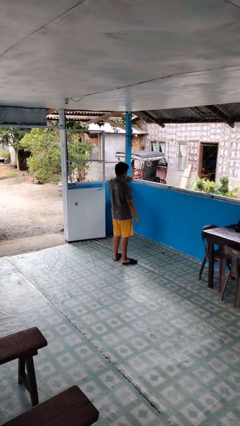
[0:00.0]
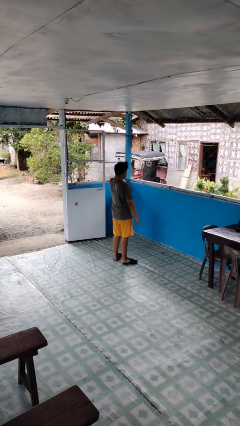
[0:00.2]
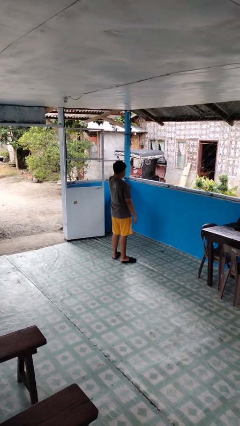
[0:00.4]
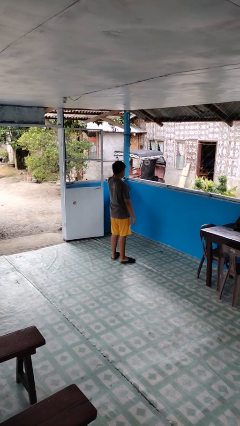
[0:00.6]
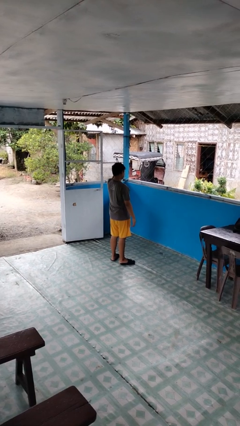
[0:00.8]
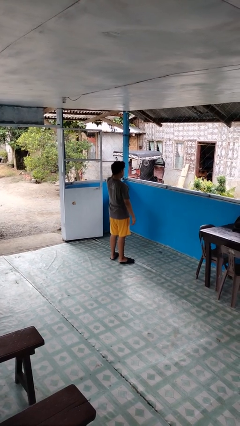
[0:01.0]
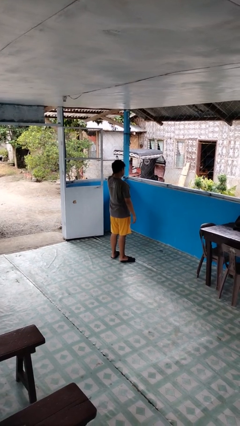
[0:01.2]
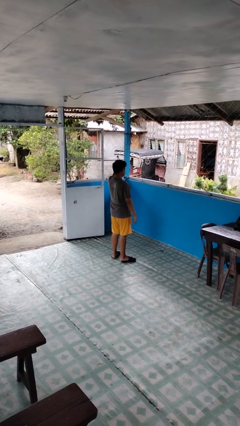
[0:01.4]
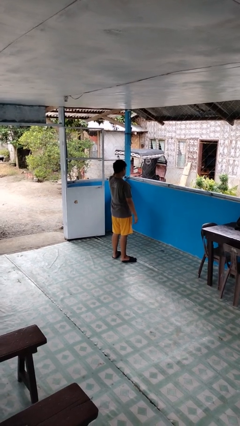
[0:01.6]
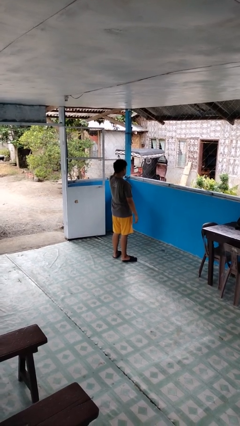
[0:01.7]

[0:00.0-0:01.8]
person pats head

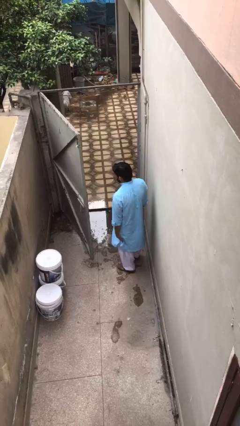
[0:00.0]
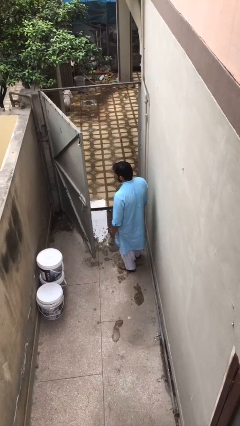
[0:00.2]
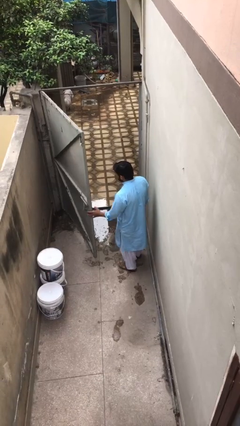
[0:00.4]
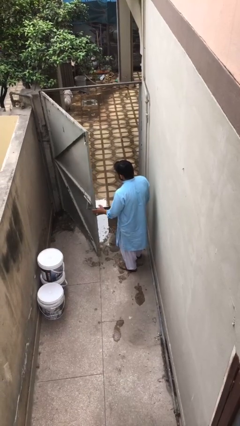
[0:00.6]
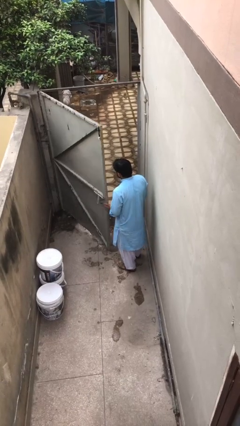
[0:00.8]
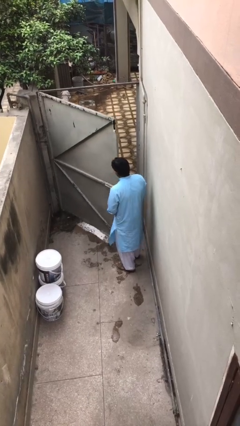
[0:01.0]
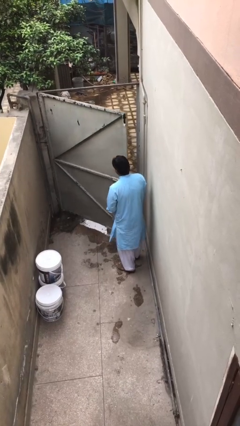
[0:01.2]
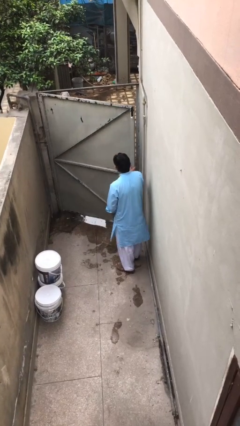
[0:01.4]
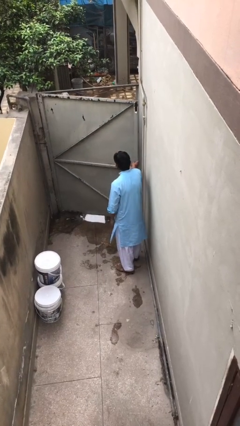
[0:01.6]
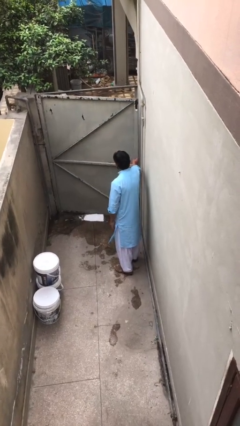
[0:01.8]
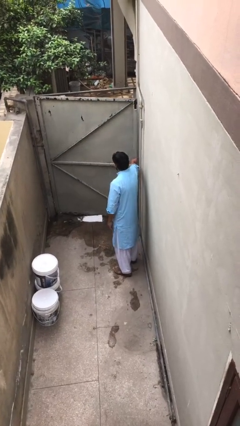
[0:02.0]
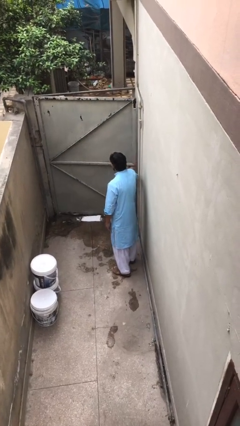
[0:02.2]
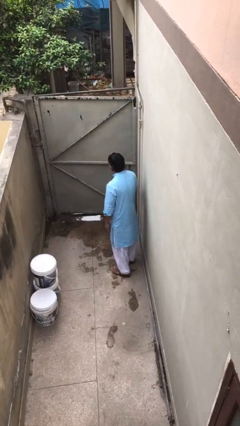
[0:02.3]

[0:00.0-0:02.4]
person closes facility door

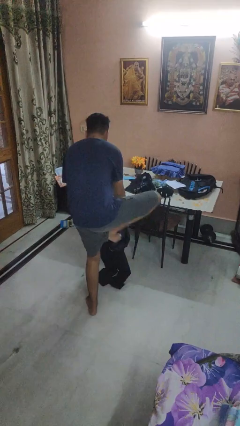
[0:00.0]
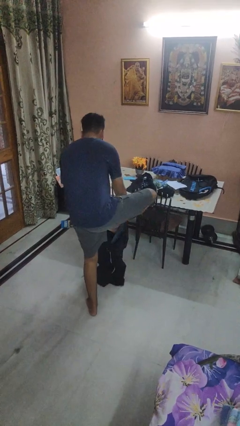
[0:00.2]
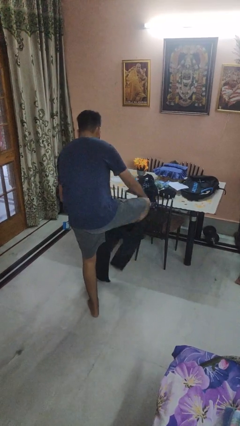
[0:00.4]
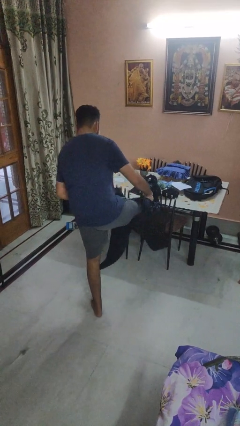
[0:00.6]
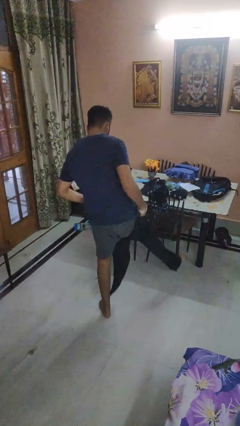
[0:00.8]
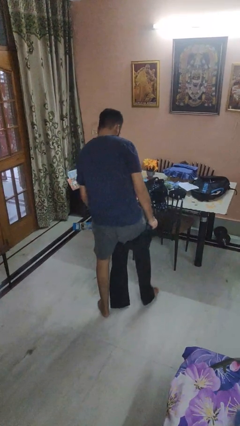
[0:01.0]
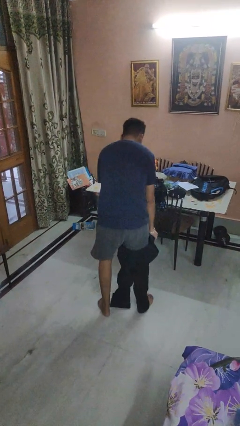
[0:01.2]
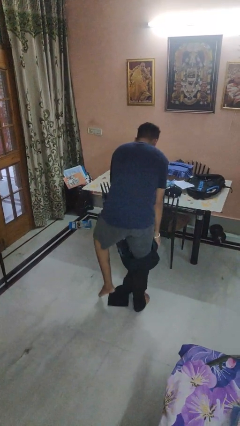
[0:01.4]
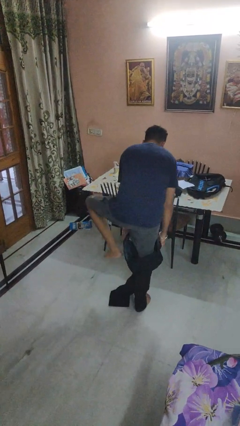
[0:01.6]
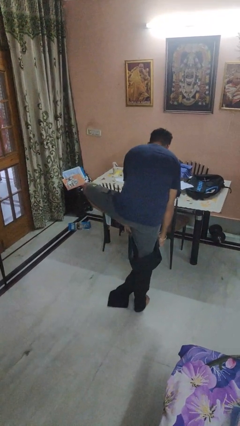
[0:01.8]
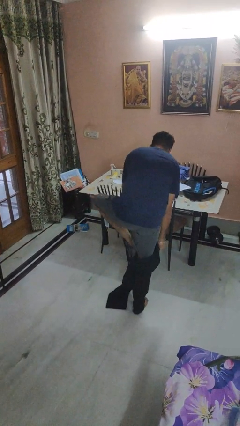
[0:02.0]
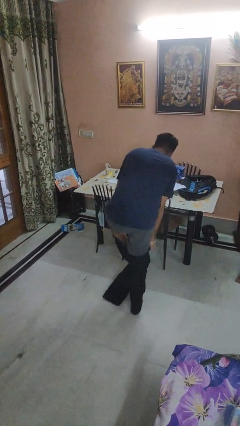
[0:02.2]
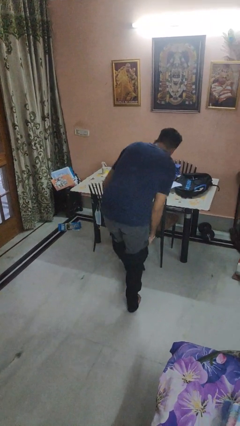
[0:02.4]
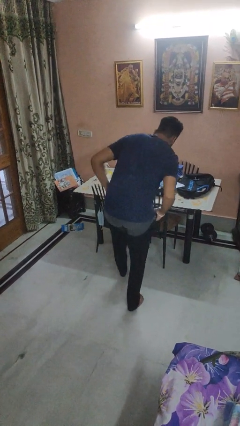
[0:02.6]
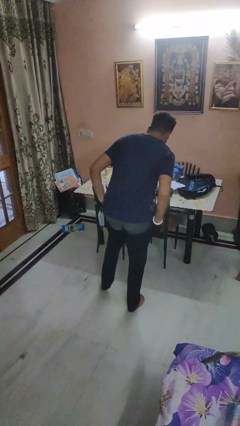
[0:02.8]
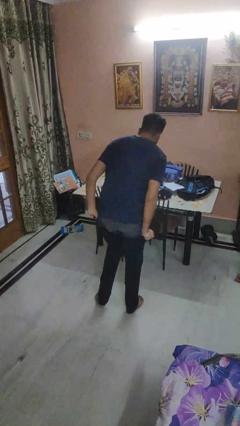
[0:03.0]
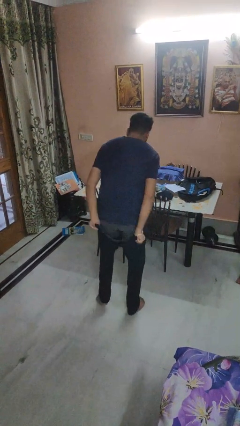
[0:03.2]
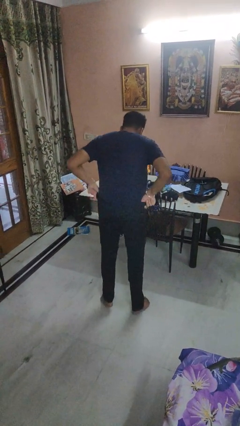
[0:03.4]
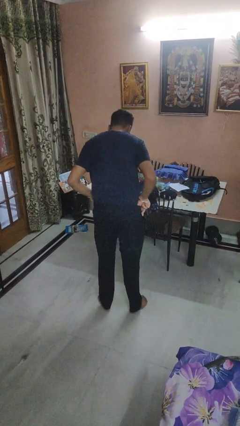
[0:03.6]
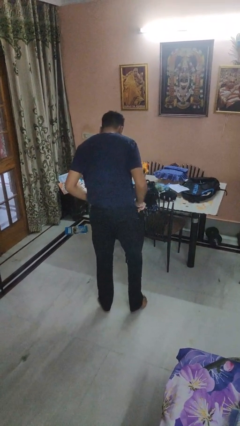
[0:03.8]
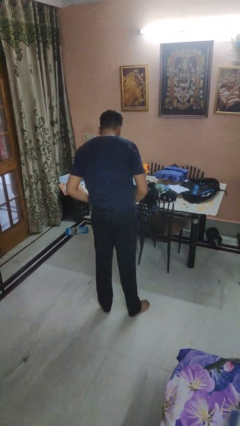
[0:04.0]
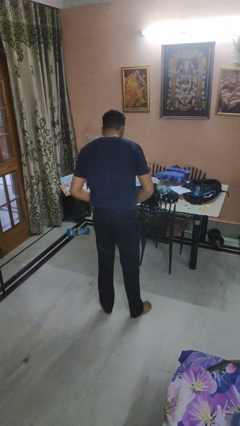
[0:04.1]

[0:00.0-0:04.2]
person puts on pants

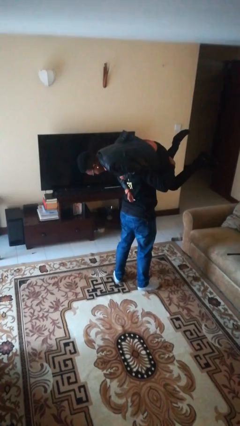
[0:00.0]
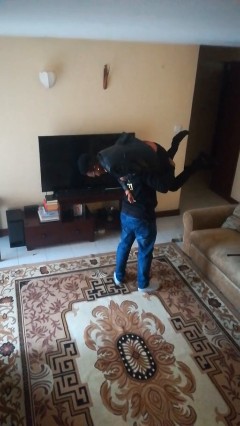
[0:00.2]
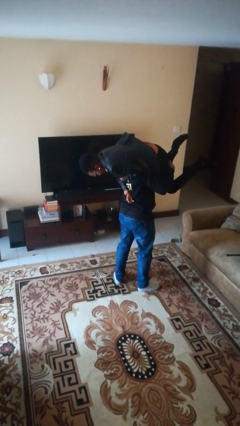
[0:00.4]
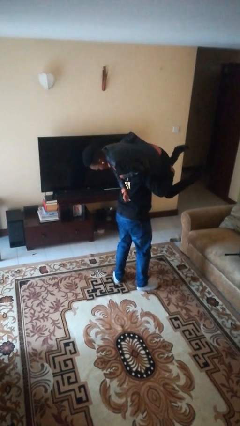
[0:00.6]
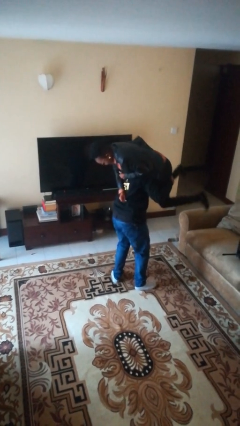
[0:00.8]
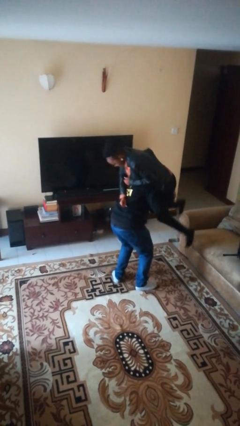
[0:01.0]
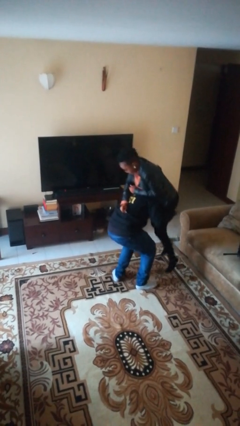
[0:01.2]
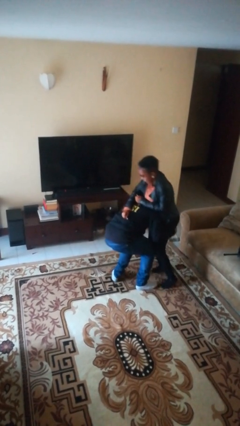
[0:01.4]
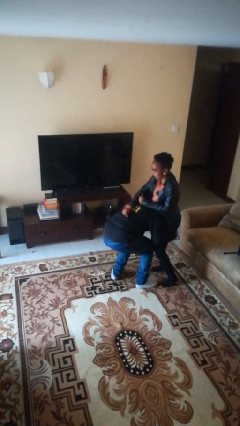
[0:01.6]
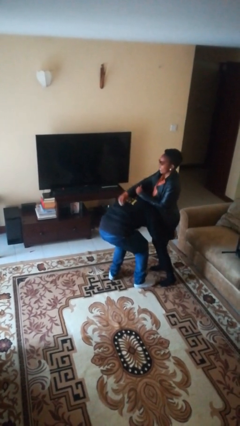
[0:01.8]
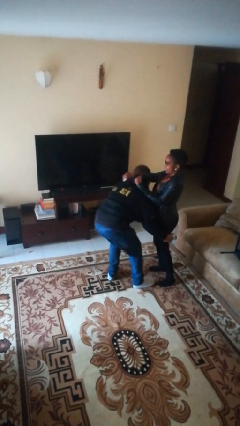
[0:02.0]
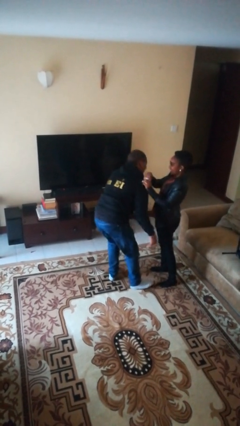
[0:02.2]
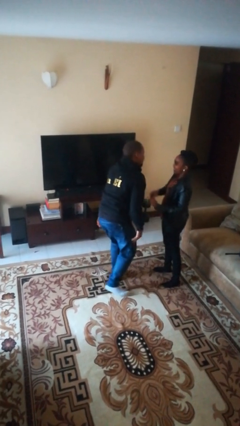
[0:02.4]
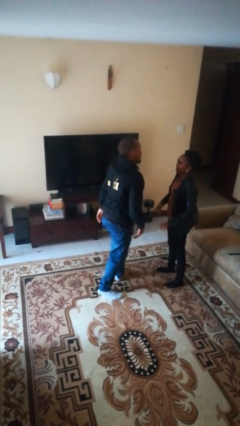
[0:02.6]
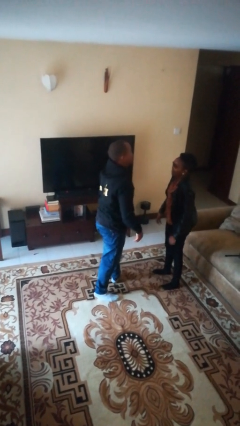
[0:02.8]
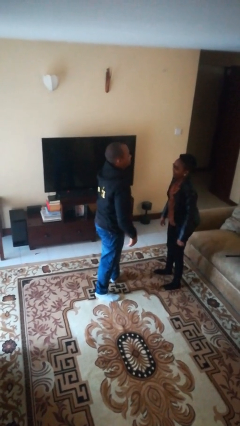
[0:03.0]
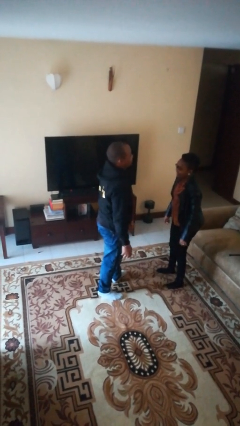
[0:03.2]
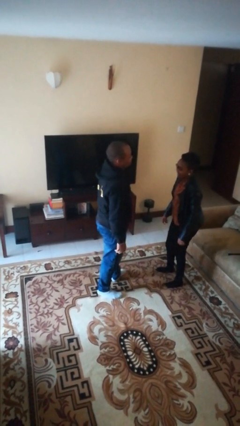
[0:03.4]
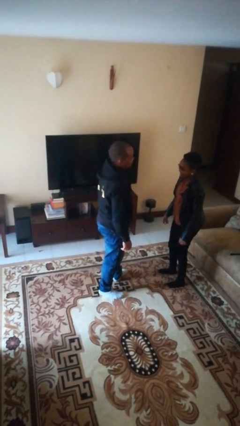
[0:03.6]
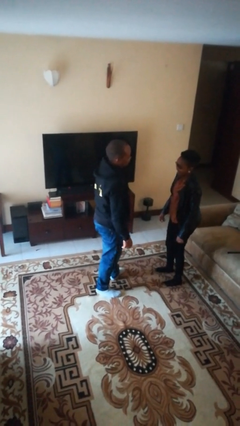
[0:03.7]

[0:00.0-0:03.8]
person puts down person

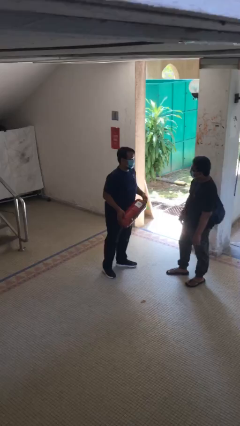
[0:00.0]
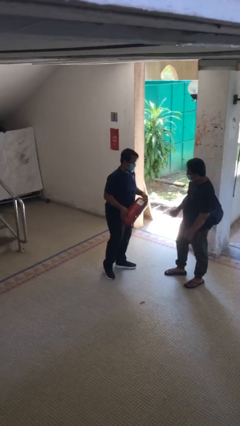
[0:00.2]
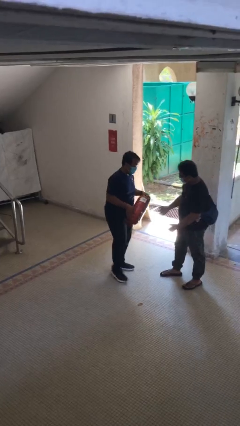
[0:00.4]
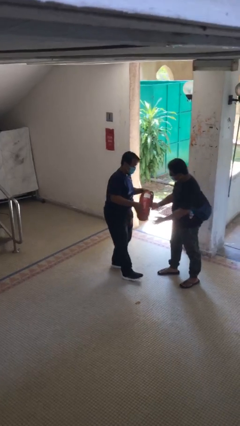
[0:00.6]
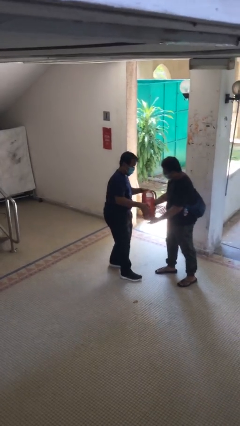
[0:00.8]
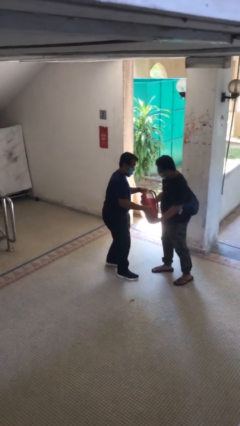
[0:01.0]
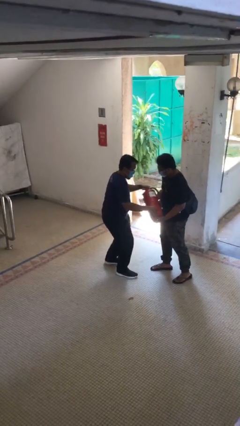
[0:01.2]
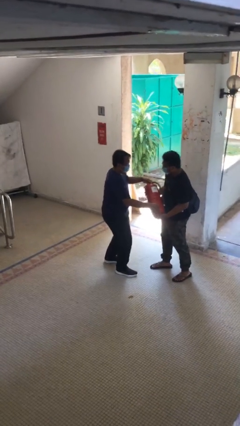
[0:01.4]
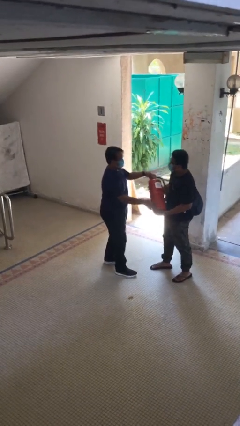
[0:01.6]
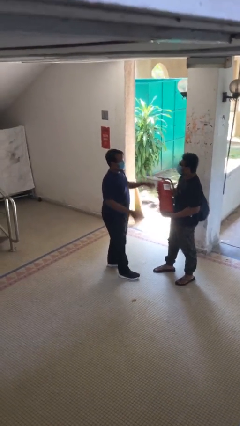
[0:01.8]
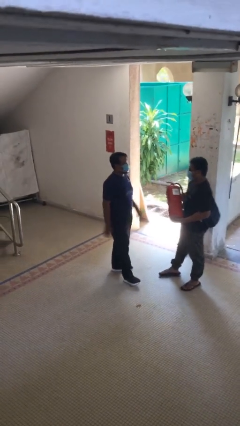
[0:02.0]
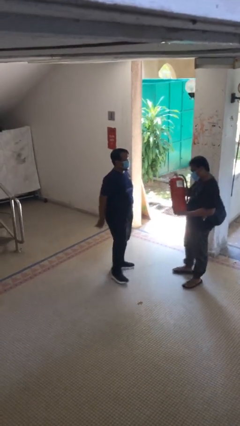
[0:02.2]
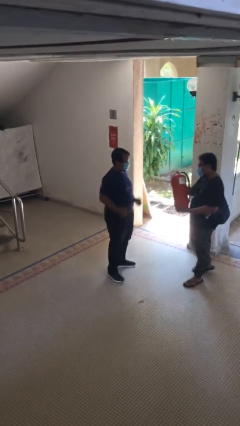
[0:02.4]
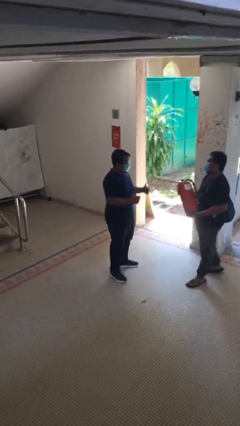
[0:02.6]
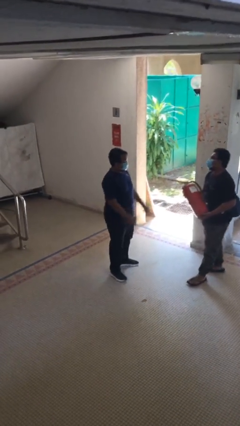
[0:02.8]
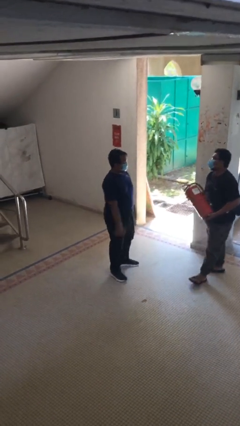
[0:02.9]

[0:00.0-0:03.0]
person transfers object to person

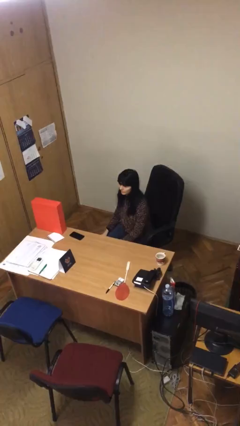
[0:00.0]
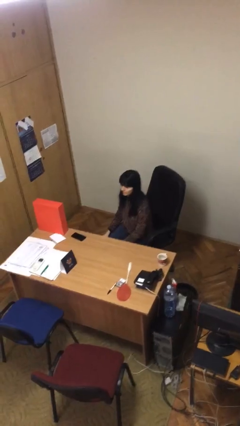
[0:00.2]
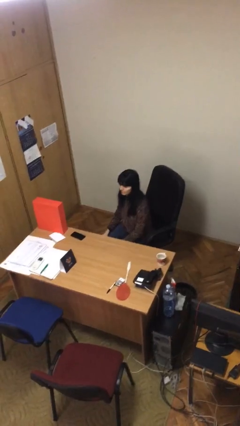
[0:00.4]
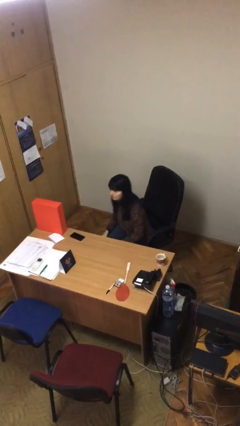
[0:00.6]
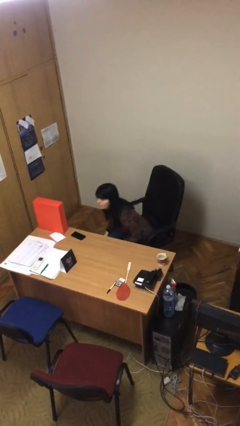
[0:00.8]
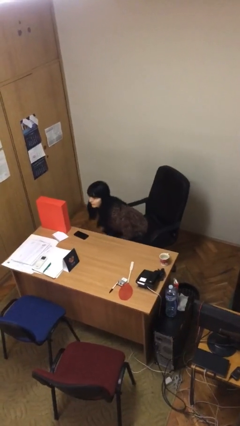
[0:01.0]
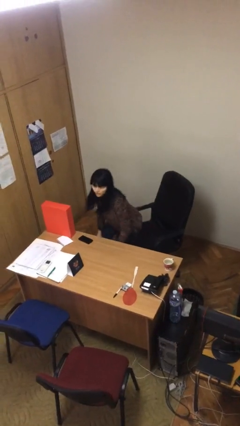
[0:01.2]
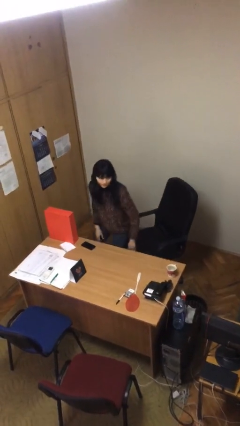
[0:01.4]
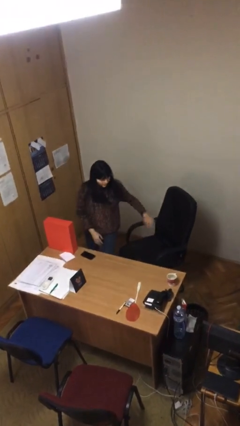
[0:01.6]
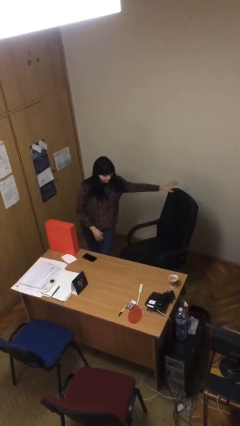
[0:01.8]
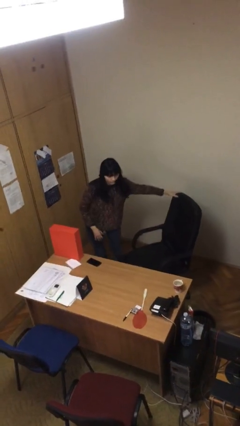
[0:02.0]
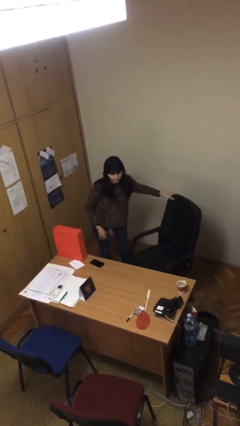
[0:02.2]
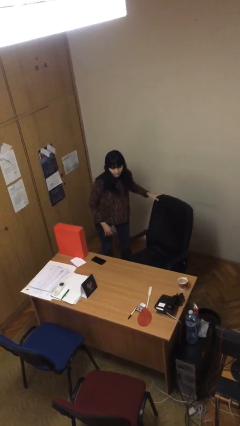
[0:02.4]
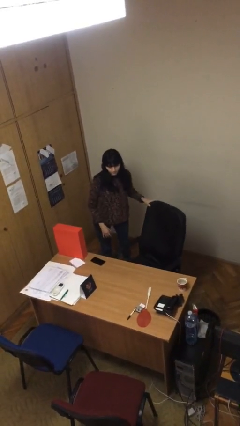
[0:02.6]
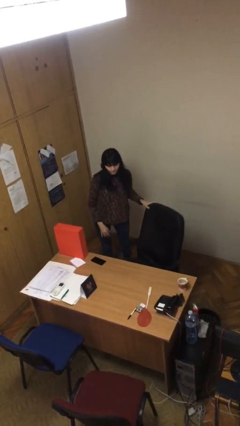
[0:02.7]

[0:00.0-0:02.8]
person stands up
